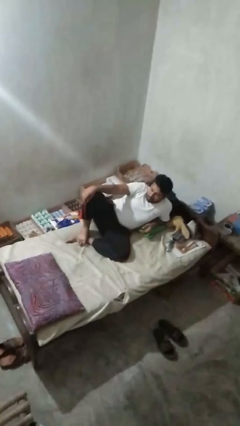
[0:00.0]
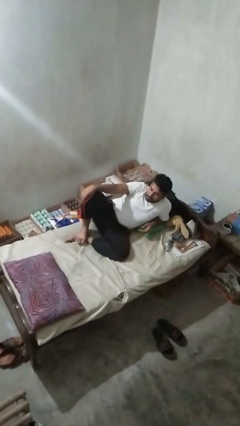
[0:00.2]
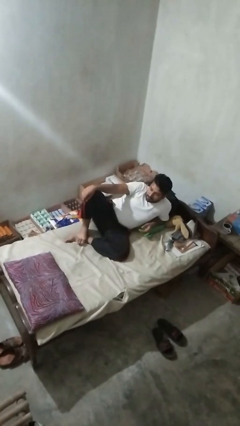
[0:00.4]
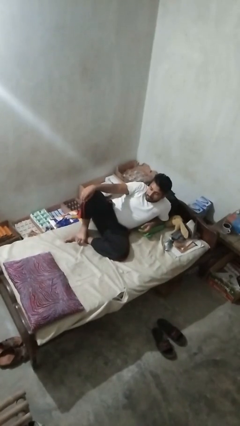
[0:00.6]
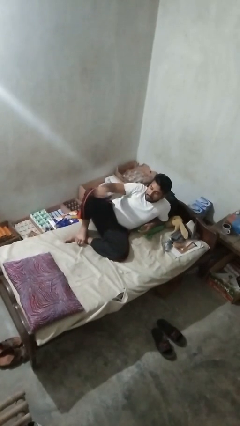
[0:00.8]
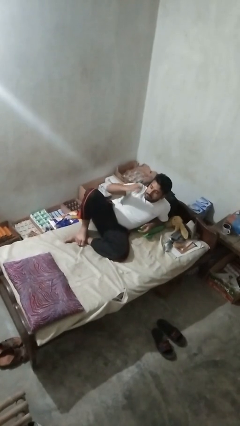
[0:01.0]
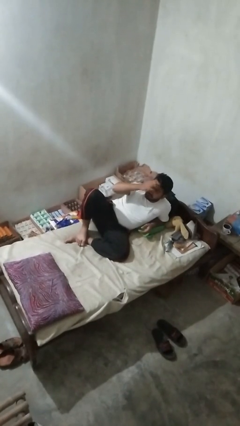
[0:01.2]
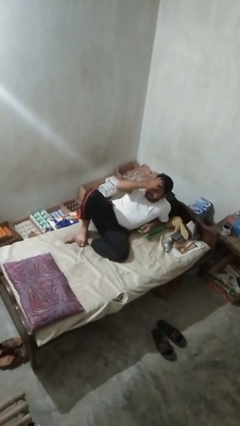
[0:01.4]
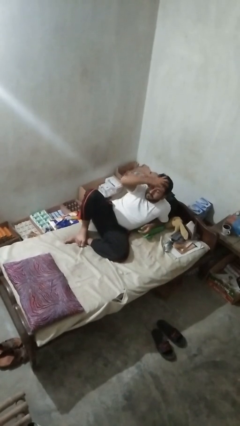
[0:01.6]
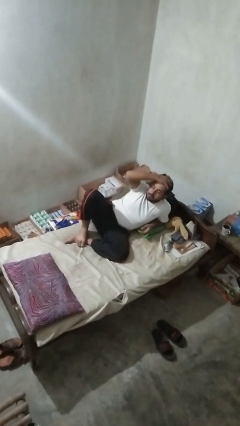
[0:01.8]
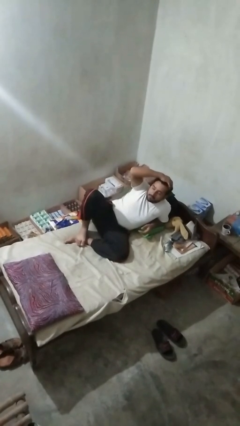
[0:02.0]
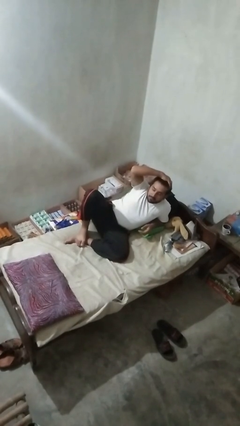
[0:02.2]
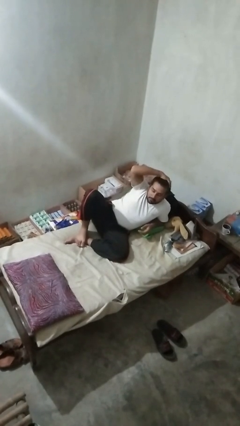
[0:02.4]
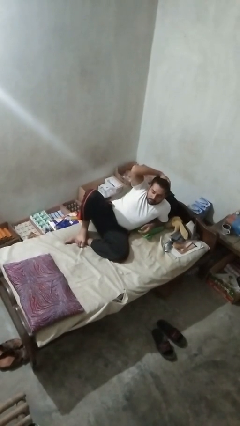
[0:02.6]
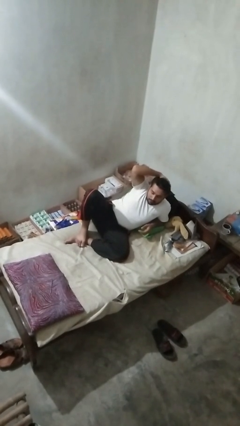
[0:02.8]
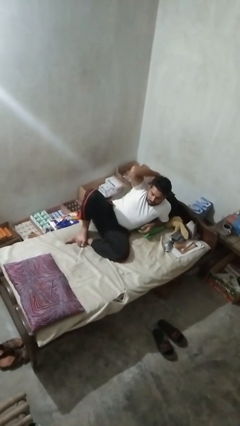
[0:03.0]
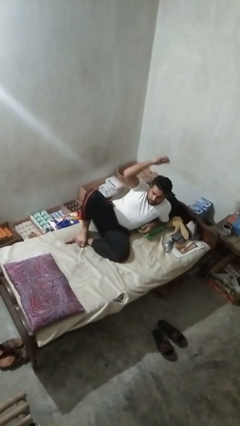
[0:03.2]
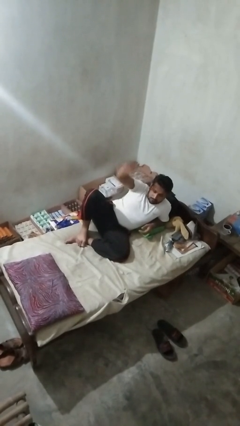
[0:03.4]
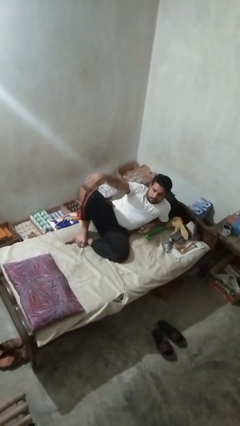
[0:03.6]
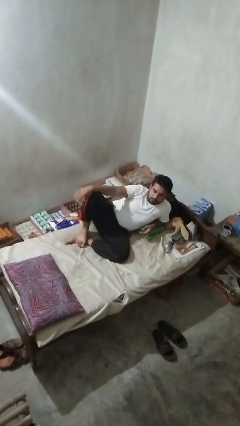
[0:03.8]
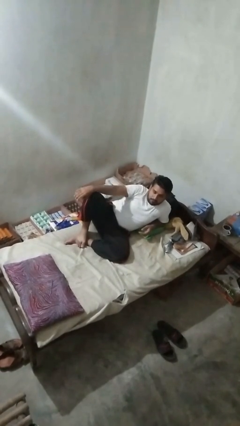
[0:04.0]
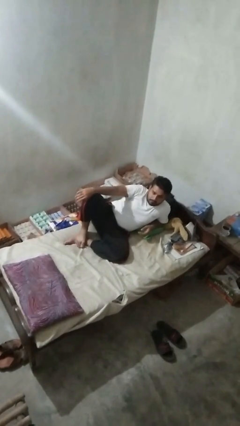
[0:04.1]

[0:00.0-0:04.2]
person strokes hair

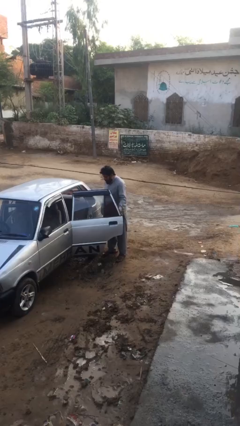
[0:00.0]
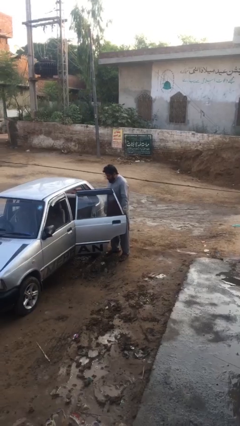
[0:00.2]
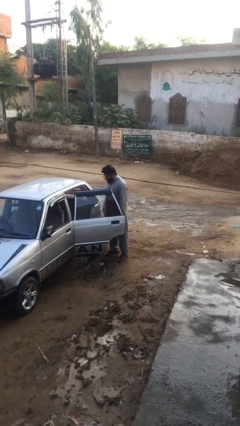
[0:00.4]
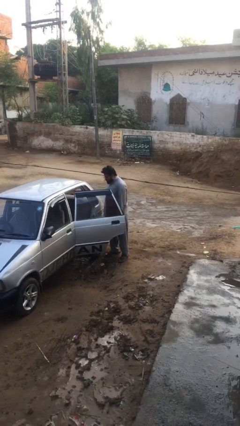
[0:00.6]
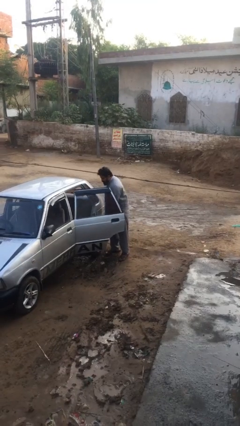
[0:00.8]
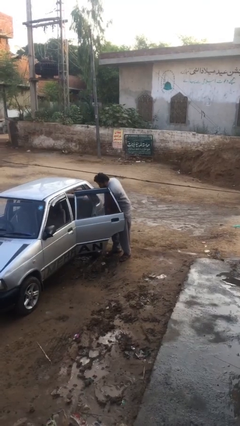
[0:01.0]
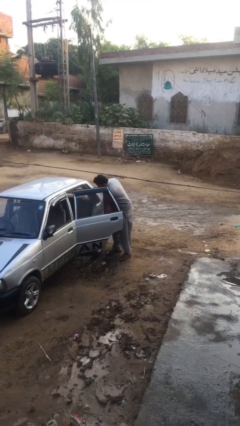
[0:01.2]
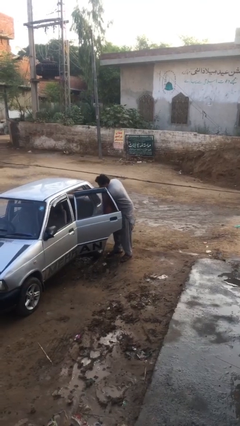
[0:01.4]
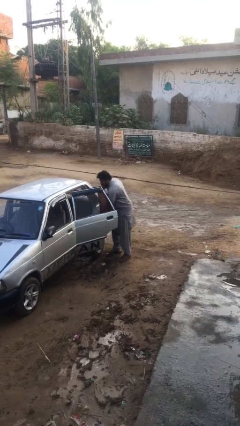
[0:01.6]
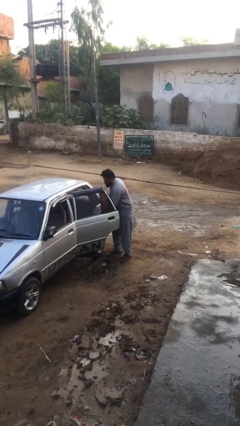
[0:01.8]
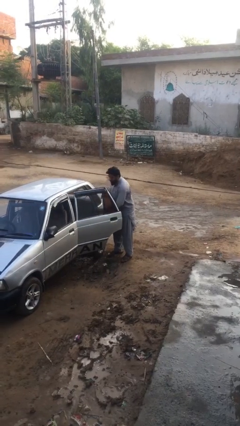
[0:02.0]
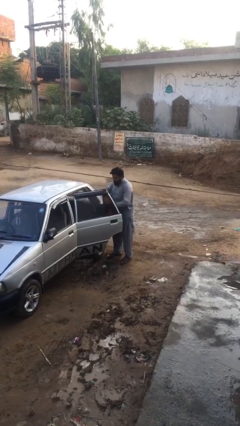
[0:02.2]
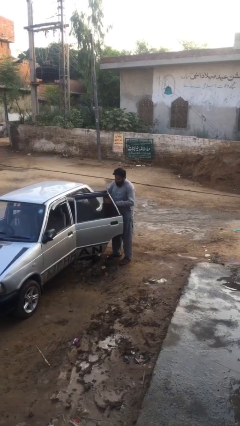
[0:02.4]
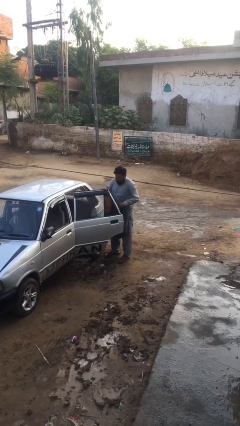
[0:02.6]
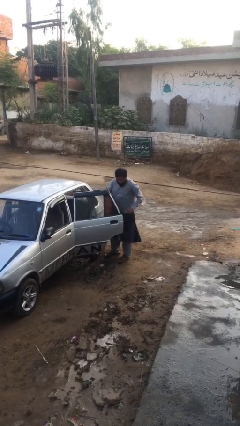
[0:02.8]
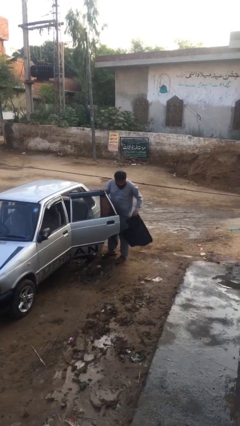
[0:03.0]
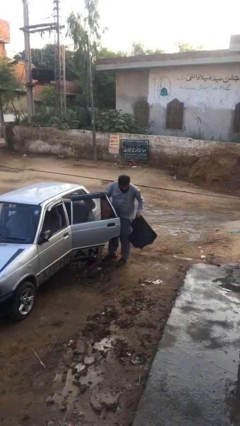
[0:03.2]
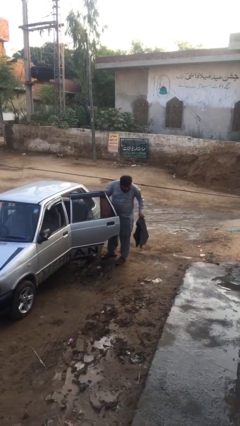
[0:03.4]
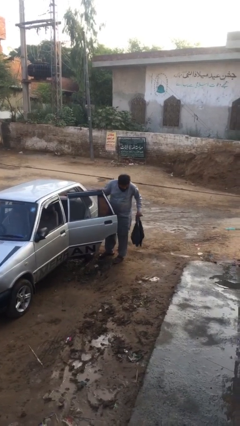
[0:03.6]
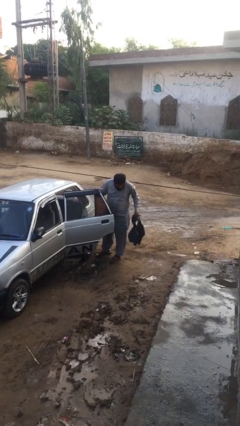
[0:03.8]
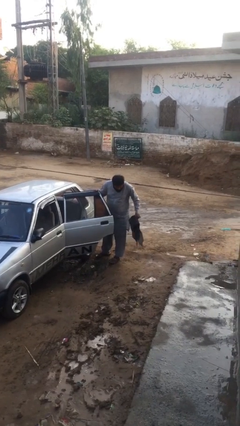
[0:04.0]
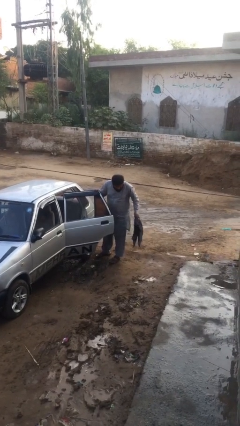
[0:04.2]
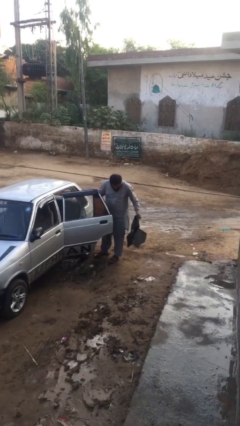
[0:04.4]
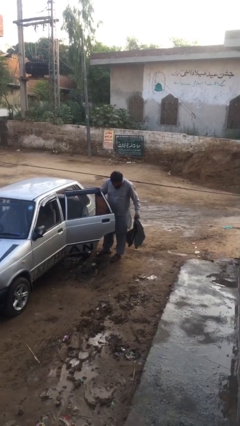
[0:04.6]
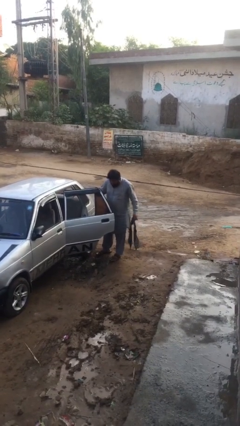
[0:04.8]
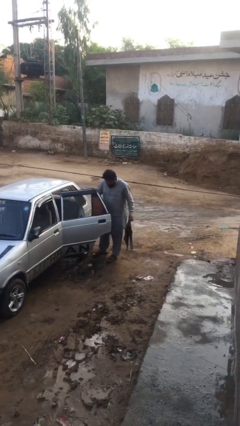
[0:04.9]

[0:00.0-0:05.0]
person unloads car

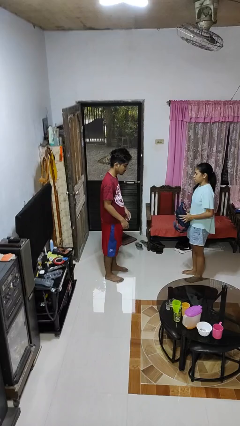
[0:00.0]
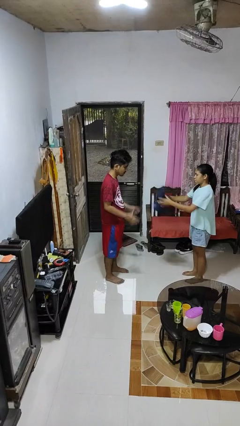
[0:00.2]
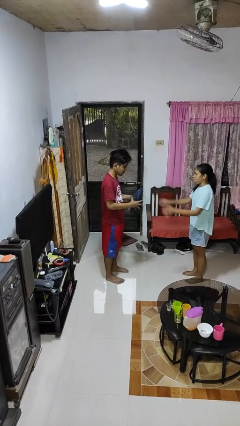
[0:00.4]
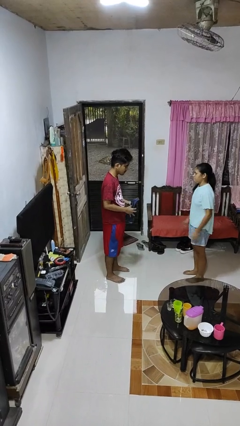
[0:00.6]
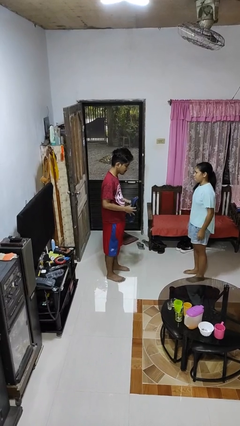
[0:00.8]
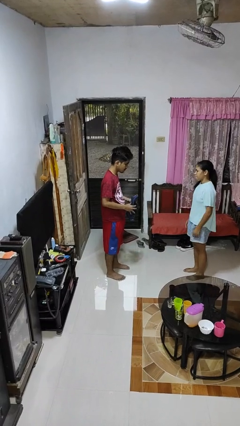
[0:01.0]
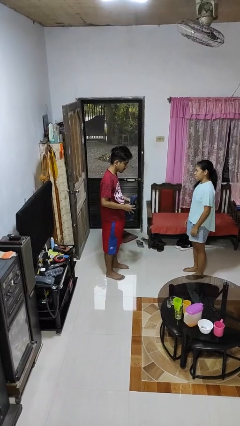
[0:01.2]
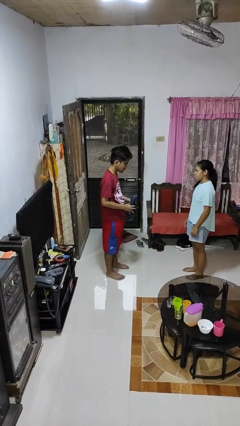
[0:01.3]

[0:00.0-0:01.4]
person catches object from person

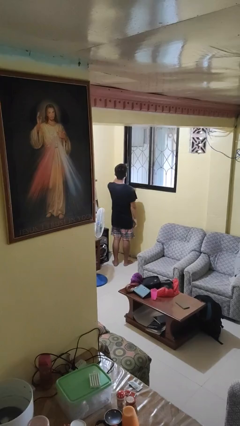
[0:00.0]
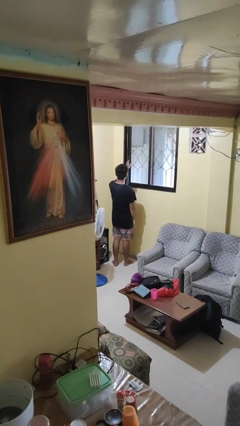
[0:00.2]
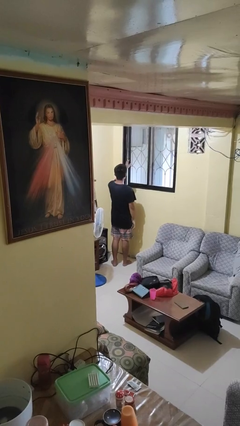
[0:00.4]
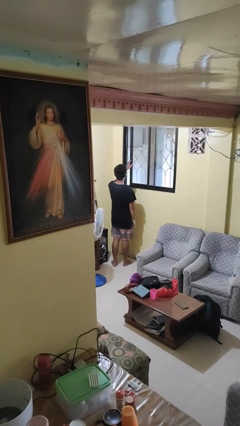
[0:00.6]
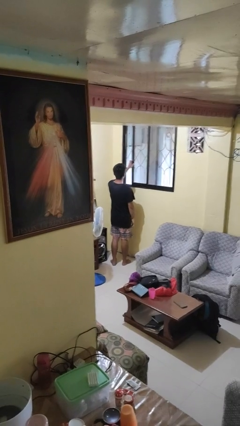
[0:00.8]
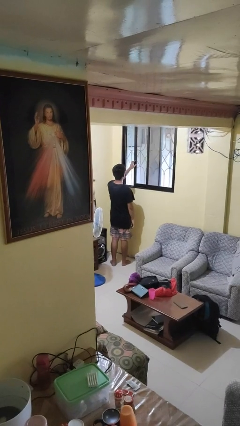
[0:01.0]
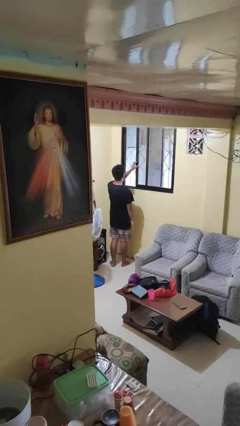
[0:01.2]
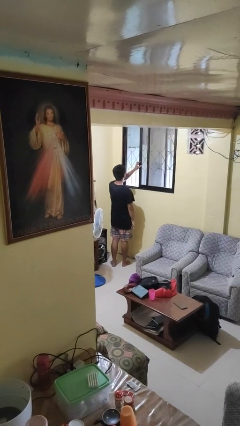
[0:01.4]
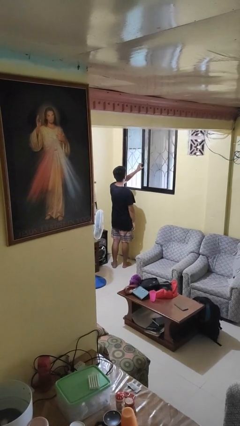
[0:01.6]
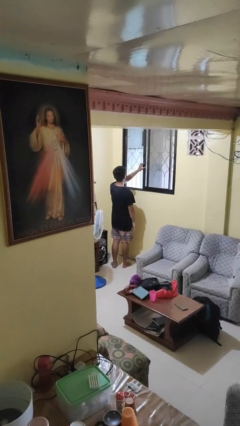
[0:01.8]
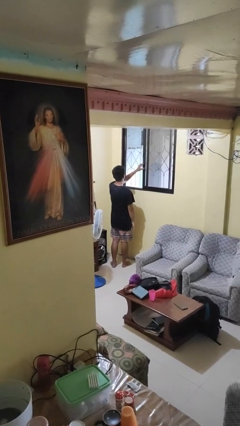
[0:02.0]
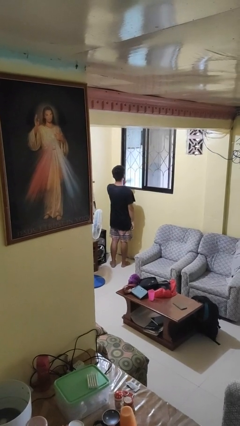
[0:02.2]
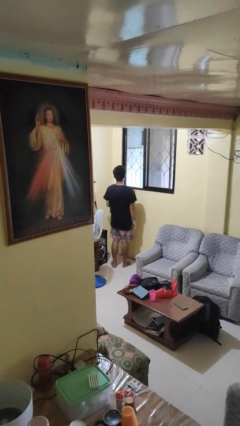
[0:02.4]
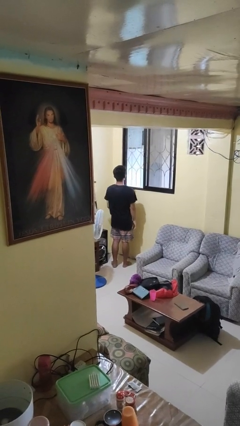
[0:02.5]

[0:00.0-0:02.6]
person opens home window

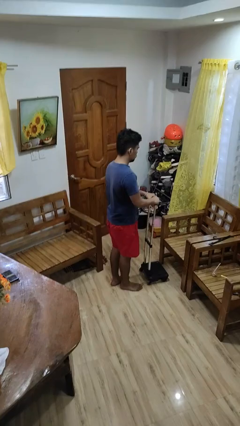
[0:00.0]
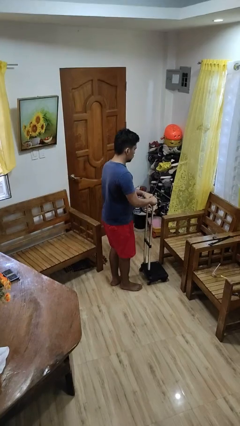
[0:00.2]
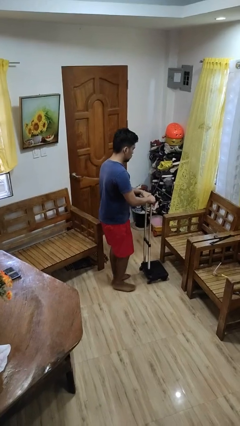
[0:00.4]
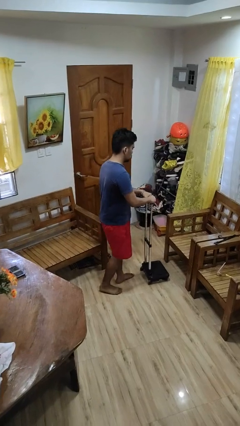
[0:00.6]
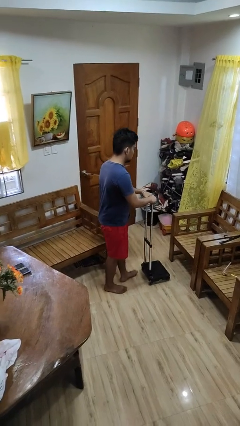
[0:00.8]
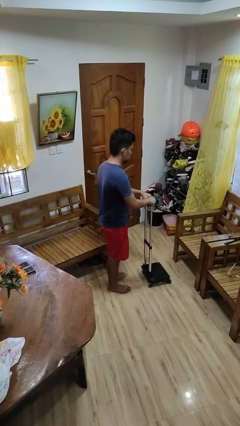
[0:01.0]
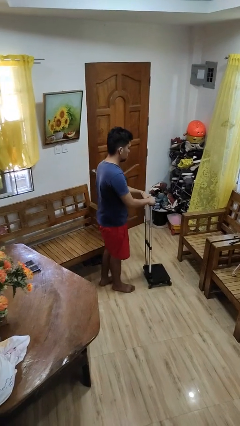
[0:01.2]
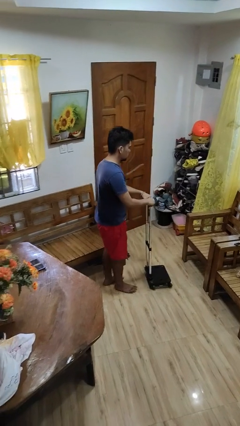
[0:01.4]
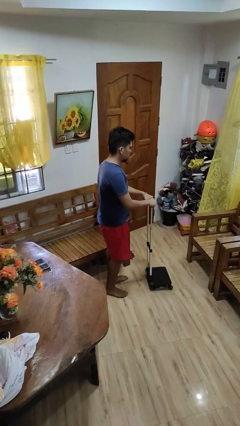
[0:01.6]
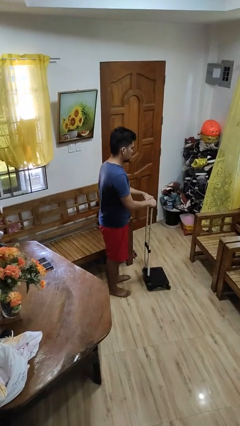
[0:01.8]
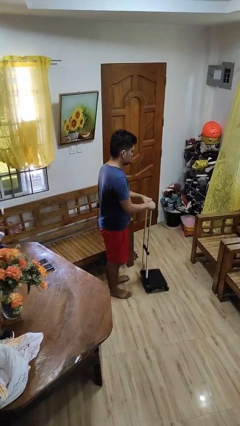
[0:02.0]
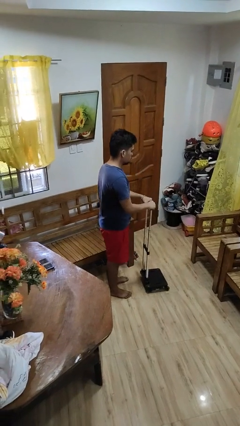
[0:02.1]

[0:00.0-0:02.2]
person pulls wheeled cart

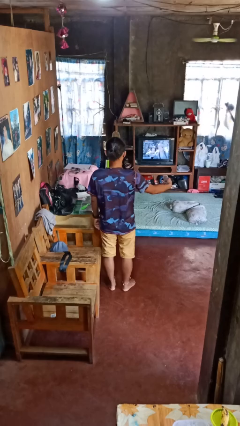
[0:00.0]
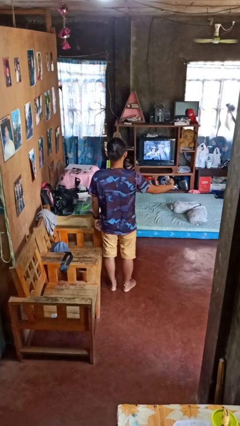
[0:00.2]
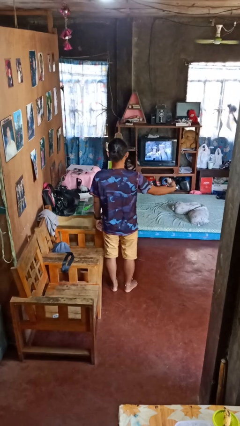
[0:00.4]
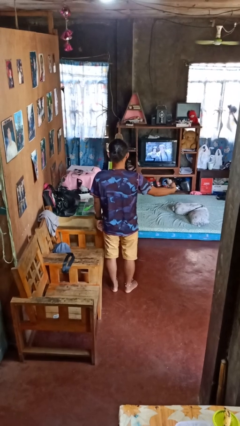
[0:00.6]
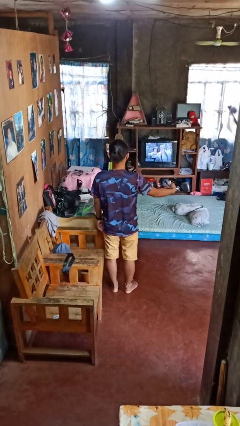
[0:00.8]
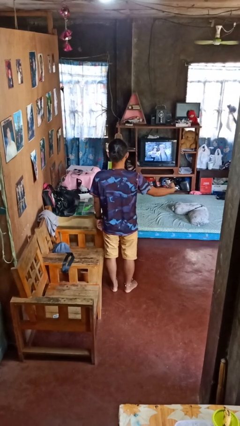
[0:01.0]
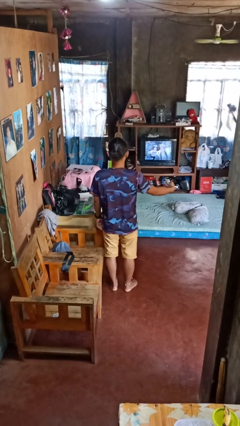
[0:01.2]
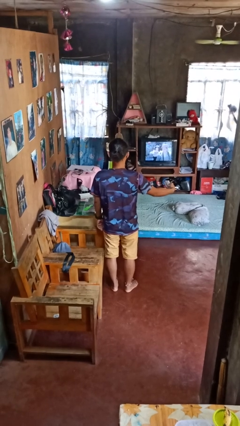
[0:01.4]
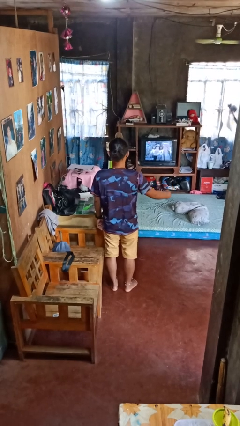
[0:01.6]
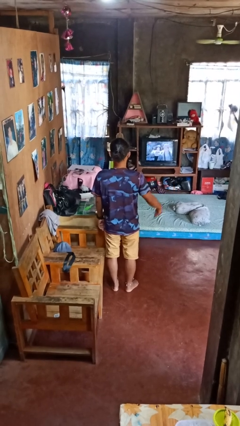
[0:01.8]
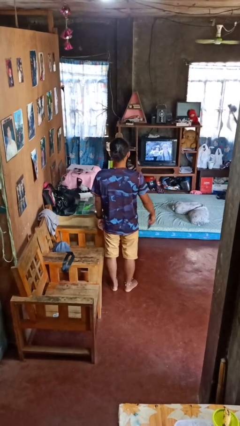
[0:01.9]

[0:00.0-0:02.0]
person uses television remote

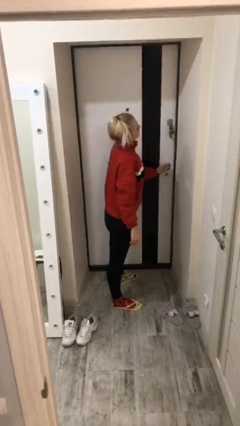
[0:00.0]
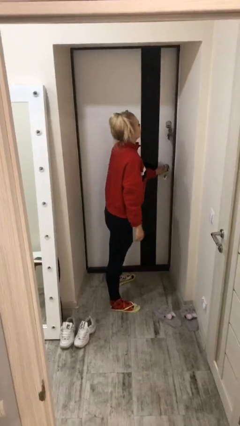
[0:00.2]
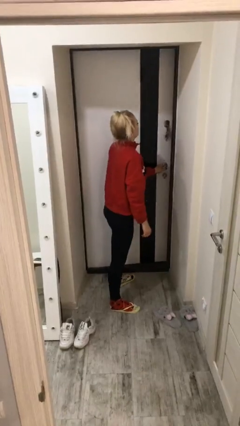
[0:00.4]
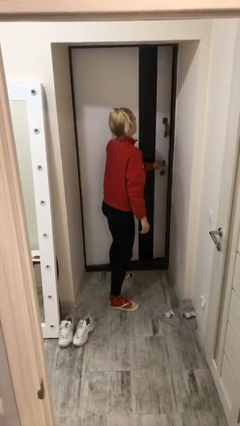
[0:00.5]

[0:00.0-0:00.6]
person opens facility door
